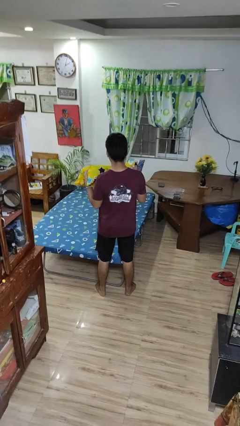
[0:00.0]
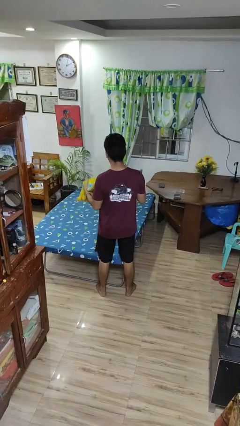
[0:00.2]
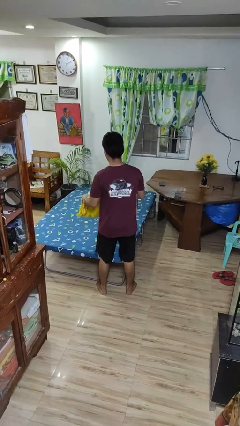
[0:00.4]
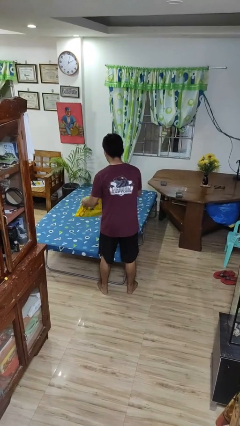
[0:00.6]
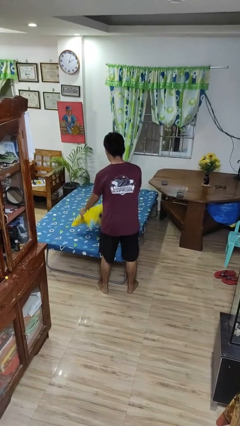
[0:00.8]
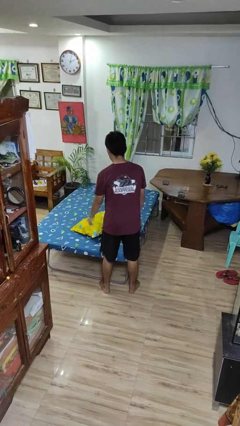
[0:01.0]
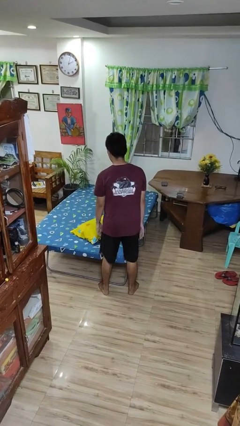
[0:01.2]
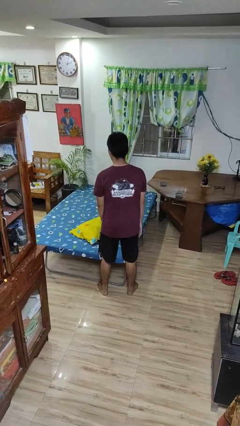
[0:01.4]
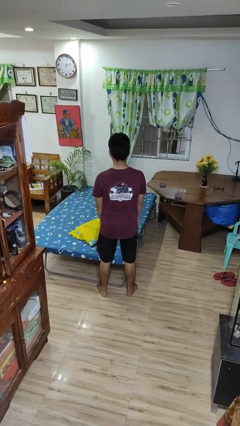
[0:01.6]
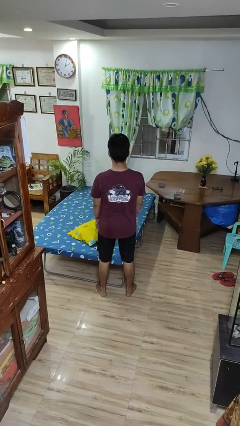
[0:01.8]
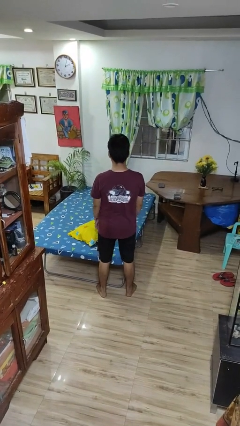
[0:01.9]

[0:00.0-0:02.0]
person puts down object on bed

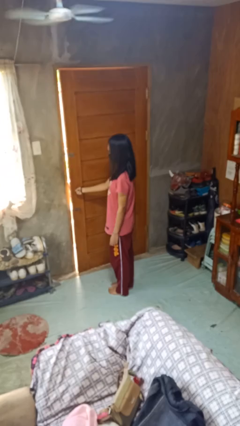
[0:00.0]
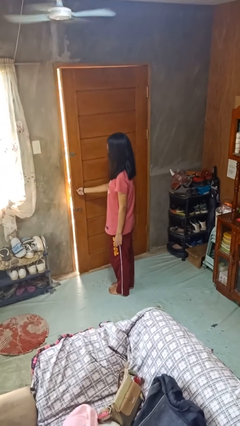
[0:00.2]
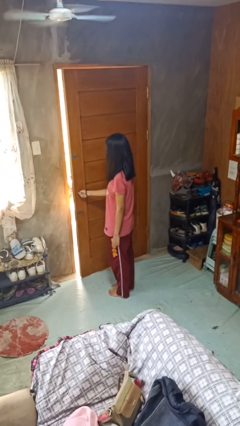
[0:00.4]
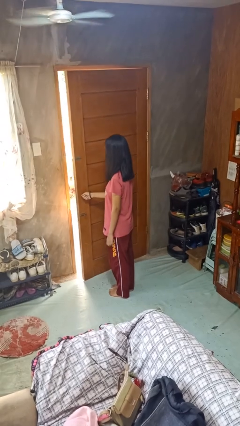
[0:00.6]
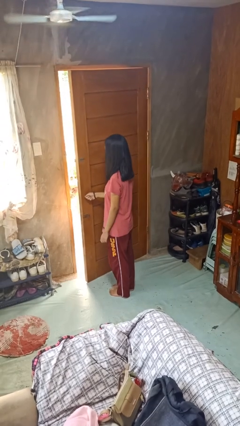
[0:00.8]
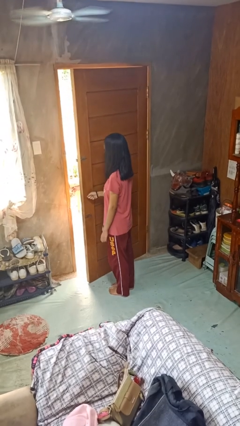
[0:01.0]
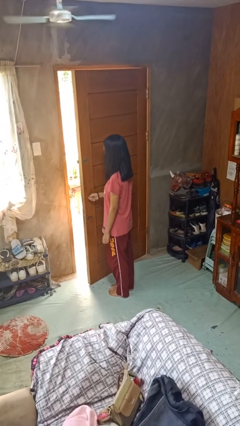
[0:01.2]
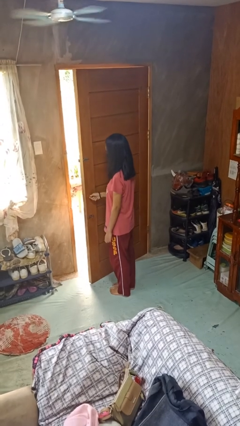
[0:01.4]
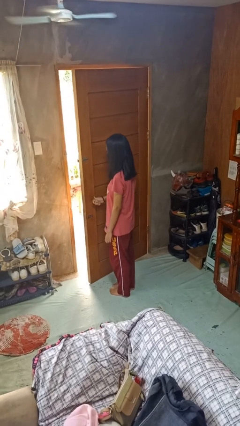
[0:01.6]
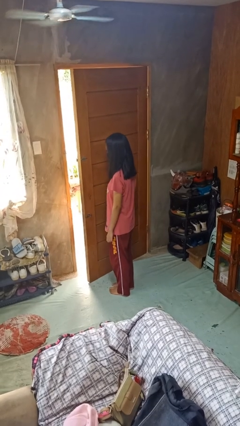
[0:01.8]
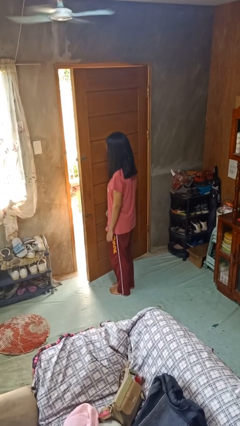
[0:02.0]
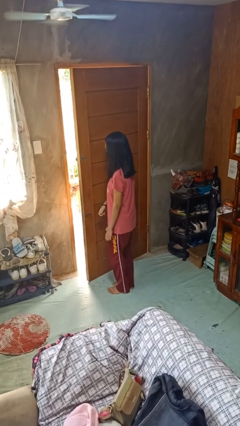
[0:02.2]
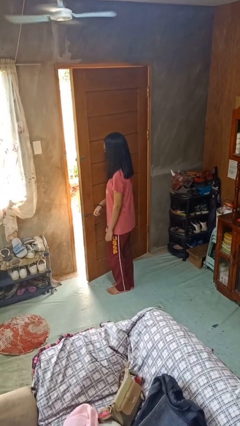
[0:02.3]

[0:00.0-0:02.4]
person opens facility door

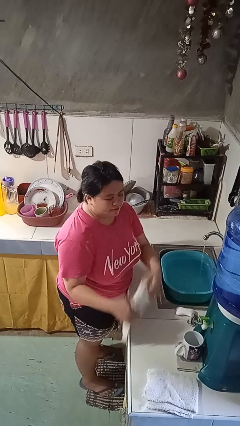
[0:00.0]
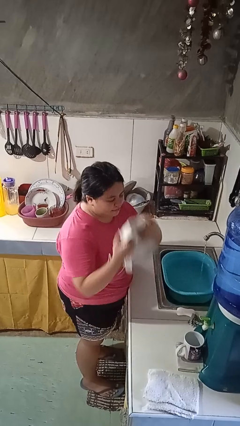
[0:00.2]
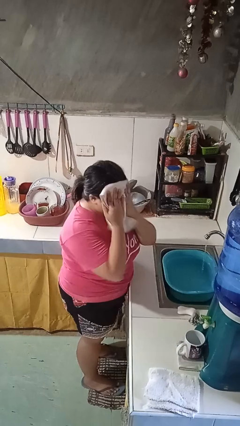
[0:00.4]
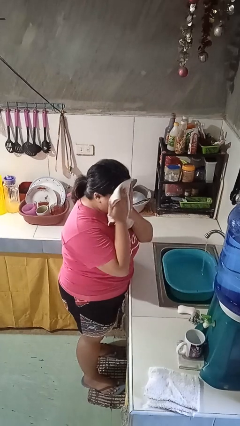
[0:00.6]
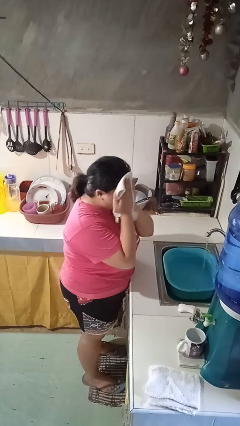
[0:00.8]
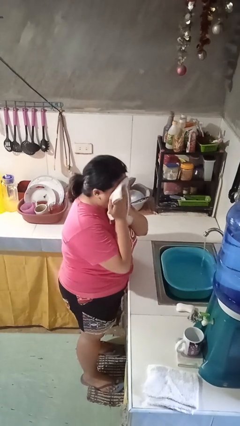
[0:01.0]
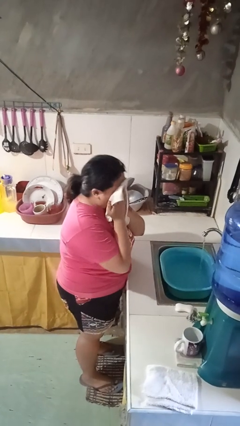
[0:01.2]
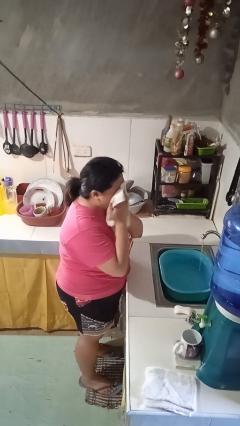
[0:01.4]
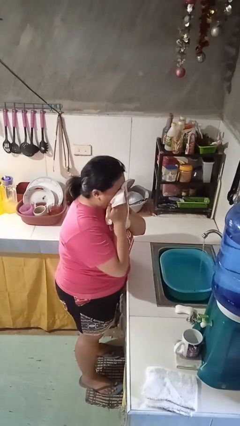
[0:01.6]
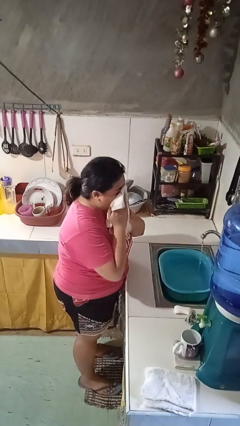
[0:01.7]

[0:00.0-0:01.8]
person dries face with towel

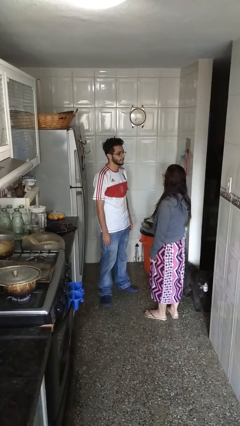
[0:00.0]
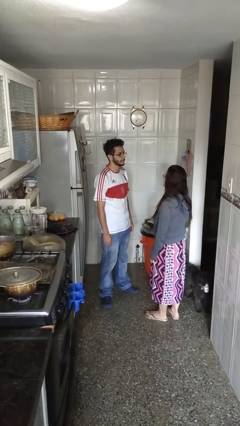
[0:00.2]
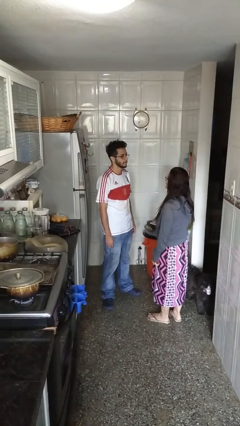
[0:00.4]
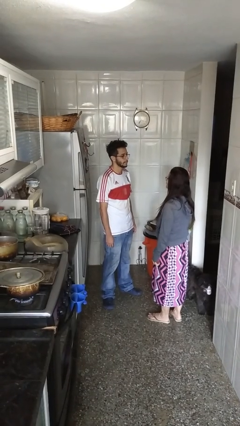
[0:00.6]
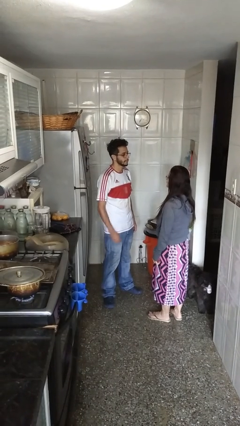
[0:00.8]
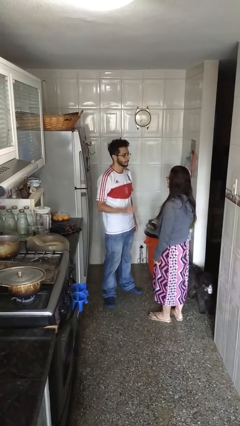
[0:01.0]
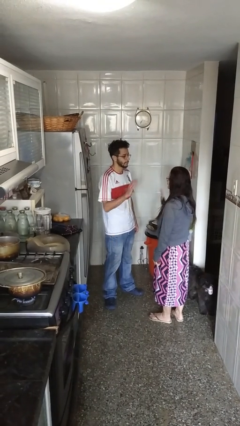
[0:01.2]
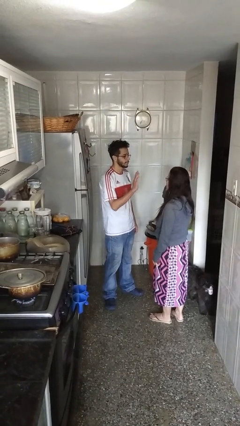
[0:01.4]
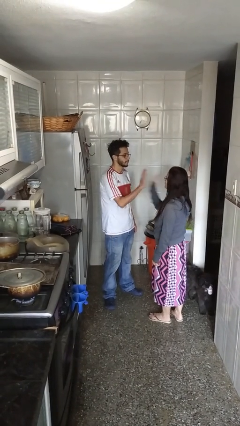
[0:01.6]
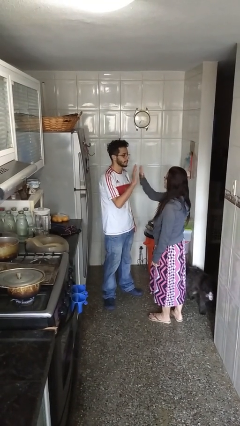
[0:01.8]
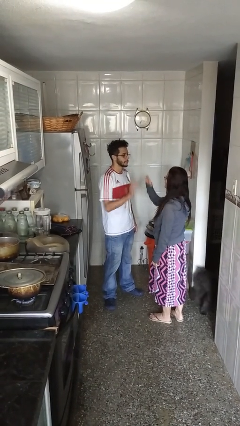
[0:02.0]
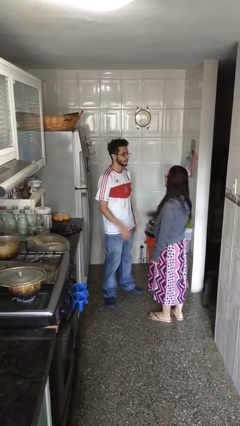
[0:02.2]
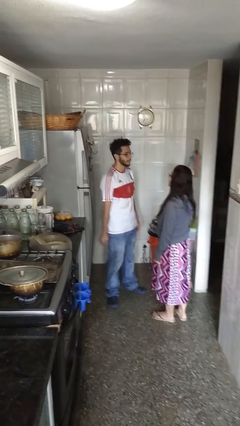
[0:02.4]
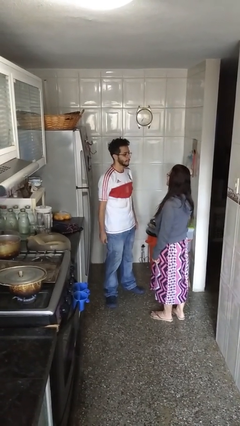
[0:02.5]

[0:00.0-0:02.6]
person highfives hand

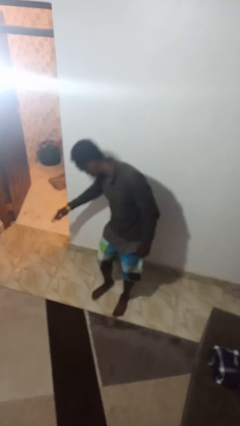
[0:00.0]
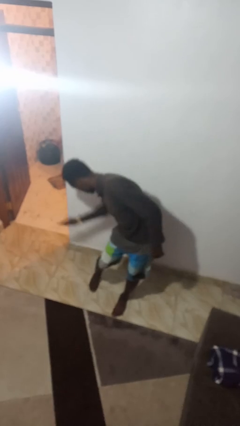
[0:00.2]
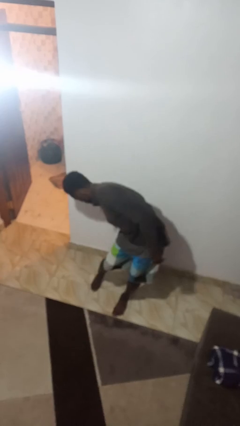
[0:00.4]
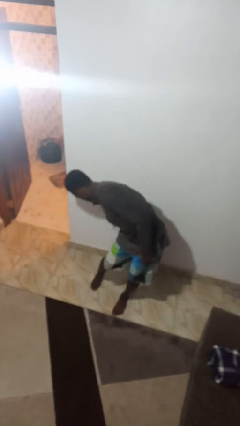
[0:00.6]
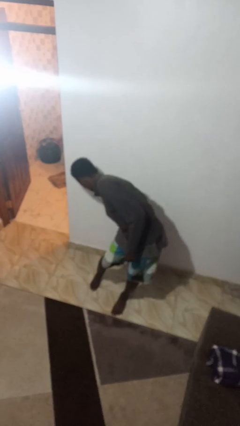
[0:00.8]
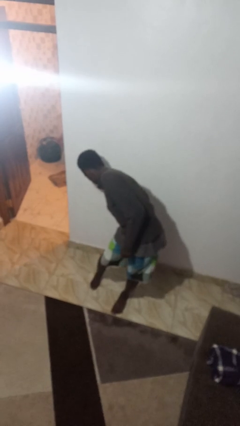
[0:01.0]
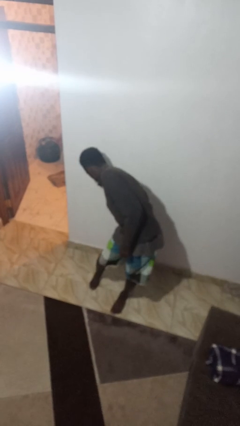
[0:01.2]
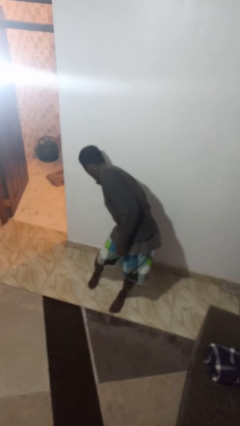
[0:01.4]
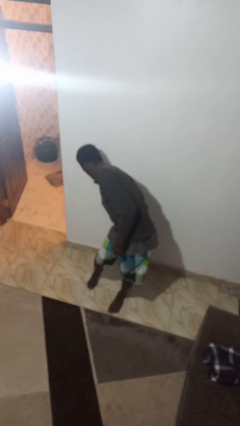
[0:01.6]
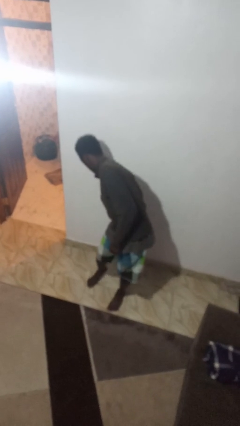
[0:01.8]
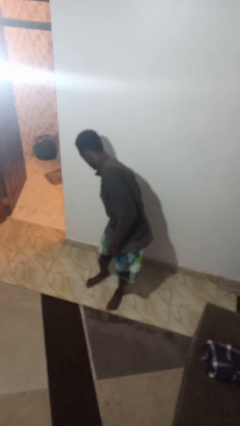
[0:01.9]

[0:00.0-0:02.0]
person swats bug

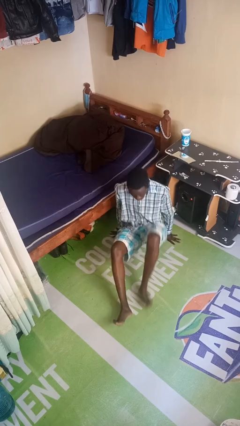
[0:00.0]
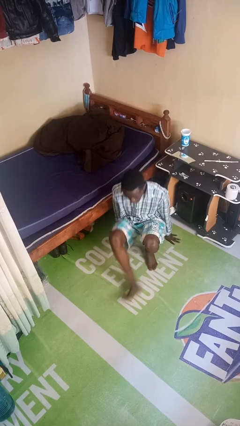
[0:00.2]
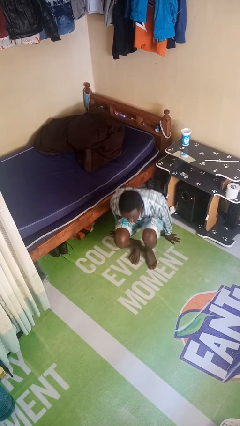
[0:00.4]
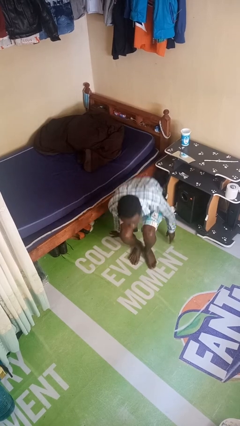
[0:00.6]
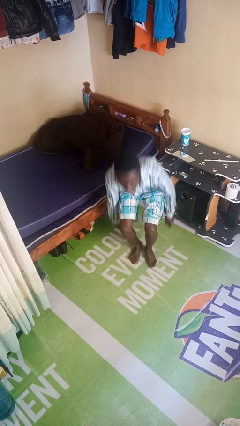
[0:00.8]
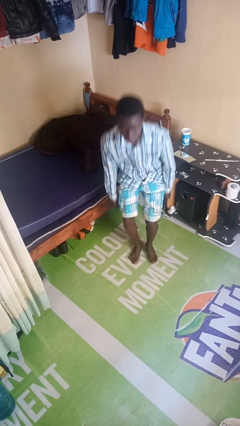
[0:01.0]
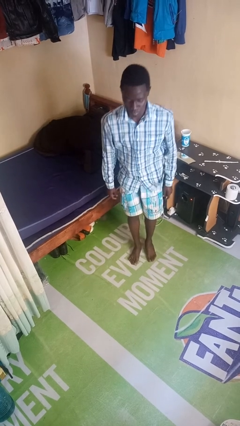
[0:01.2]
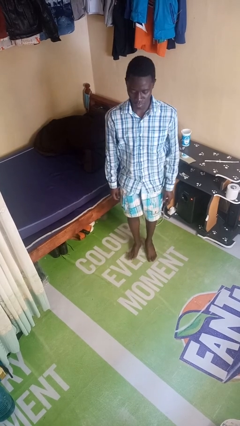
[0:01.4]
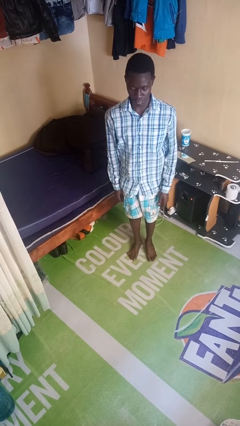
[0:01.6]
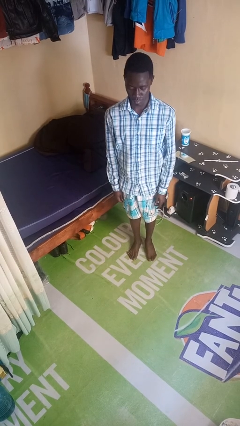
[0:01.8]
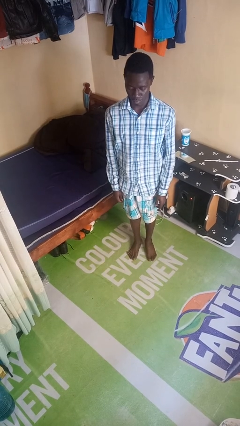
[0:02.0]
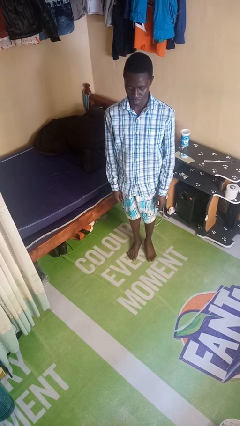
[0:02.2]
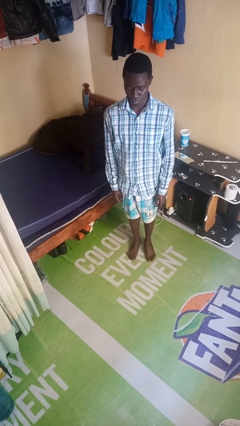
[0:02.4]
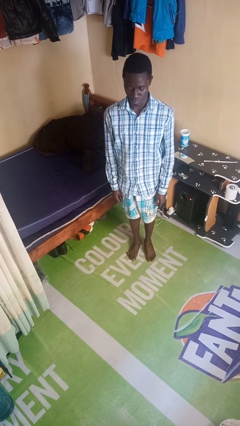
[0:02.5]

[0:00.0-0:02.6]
person stands up from floor

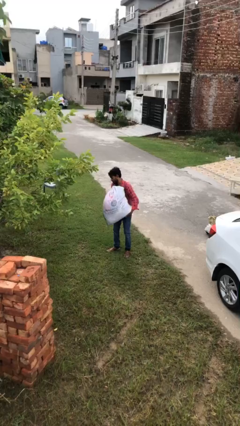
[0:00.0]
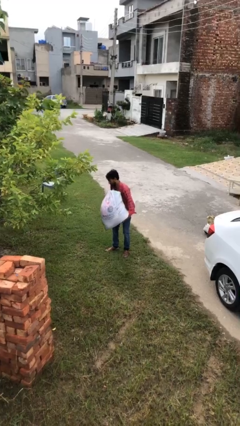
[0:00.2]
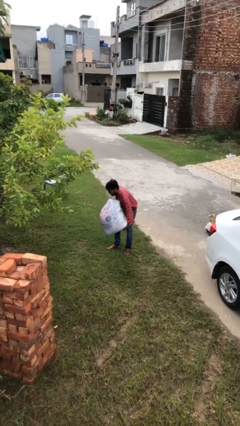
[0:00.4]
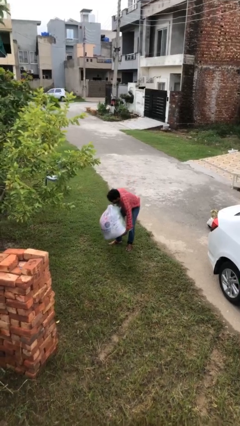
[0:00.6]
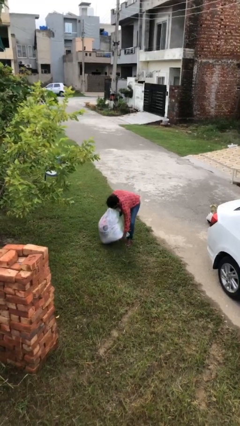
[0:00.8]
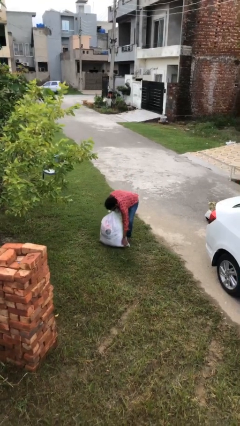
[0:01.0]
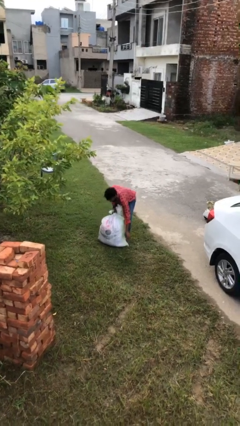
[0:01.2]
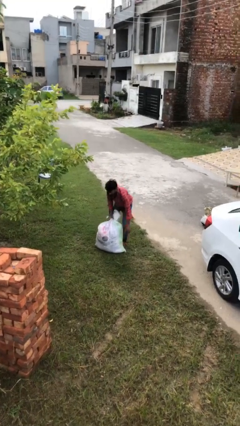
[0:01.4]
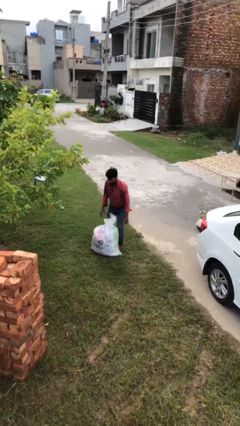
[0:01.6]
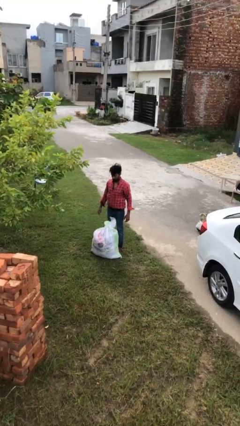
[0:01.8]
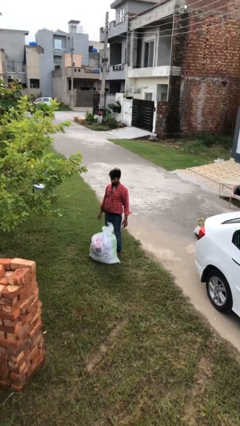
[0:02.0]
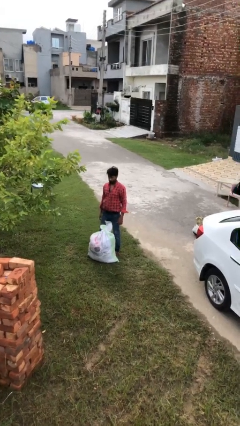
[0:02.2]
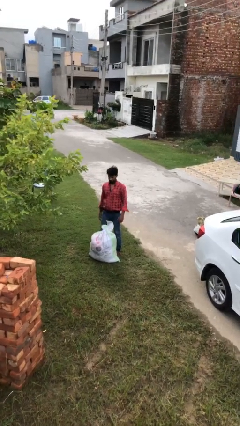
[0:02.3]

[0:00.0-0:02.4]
person puts down object on floor

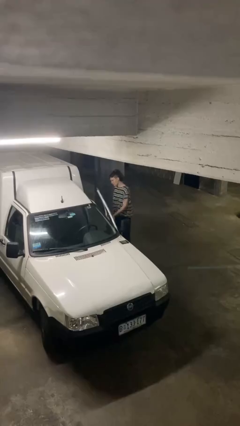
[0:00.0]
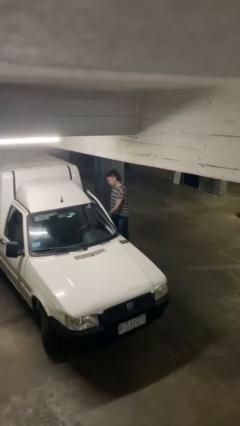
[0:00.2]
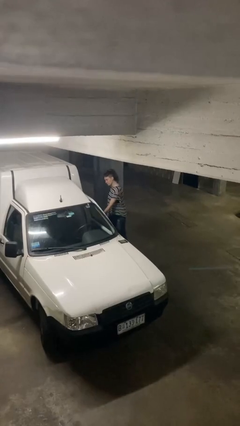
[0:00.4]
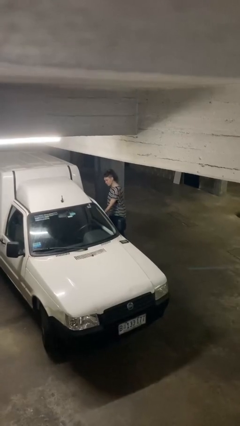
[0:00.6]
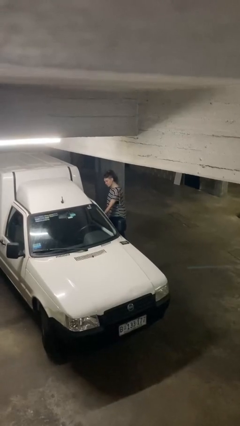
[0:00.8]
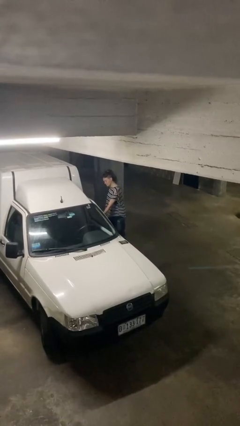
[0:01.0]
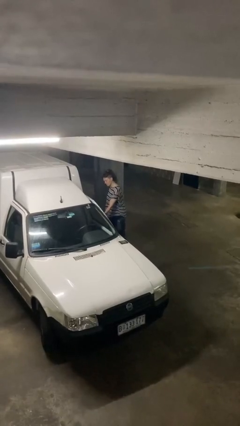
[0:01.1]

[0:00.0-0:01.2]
person closes car door
